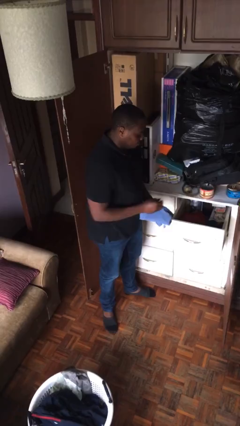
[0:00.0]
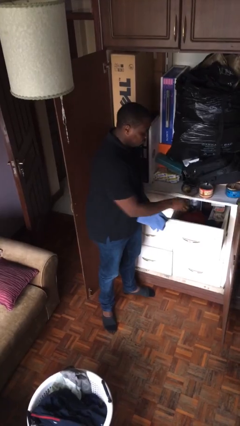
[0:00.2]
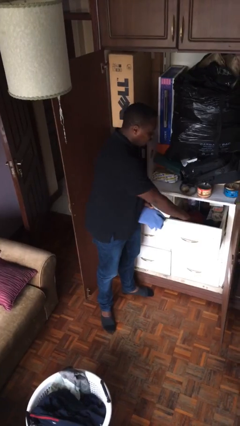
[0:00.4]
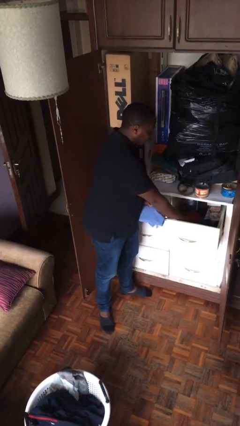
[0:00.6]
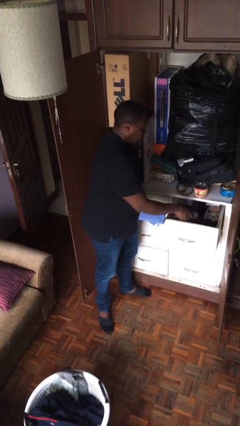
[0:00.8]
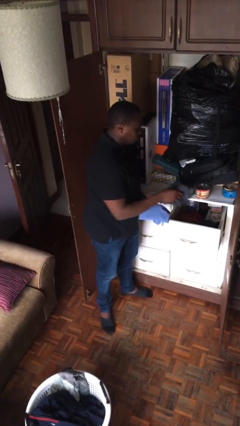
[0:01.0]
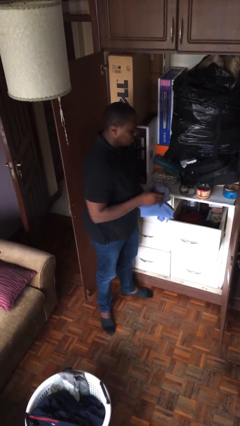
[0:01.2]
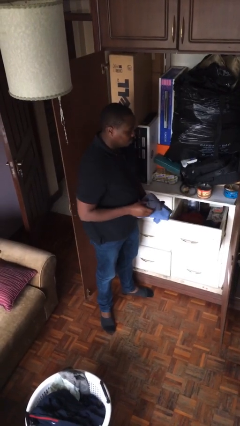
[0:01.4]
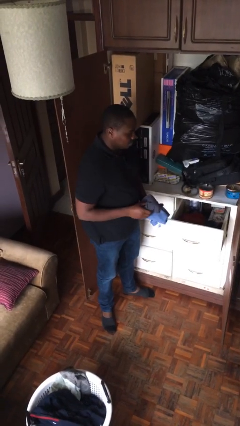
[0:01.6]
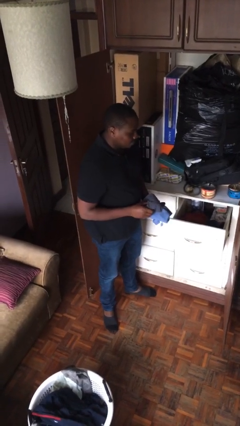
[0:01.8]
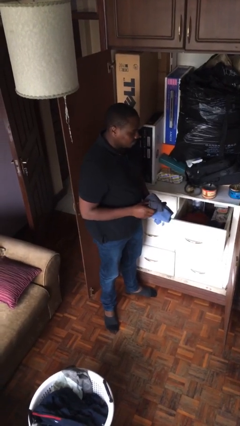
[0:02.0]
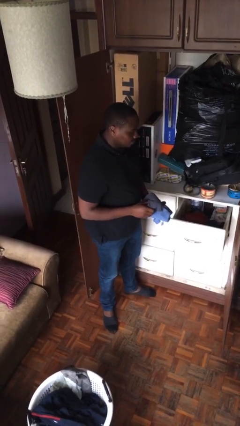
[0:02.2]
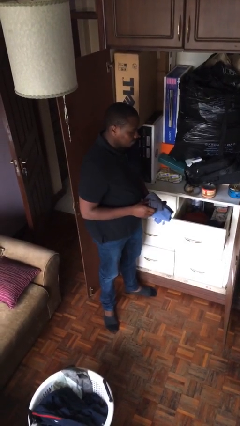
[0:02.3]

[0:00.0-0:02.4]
person takes clothes from dresser

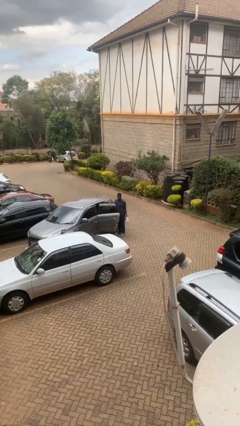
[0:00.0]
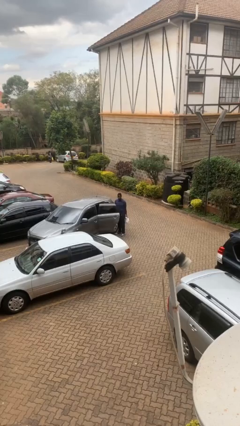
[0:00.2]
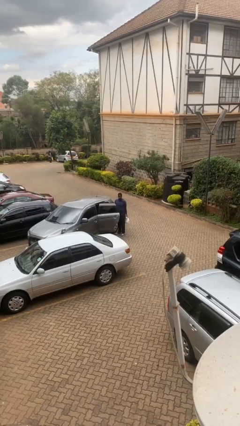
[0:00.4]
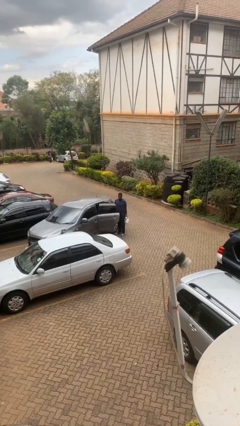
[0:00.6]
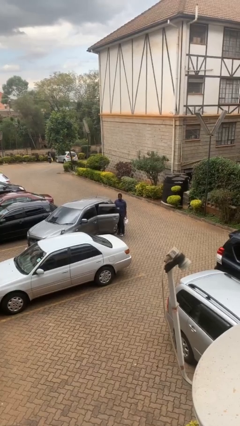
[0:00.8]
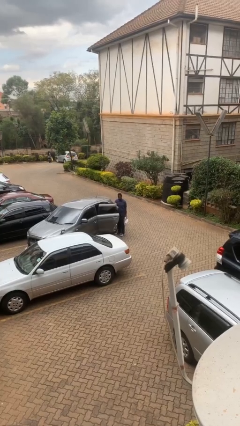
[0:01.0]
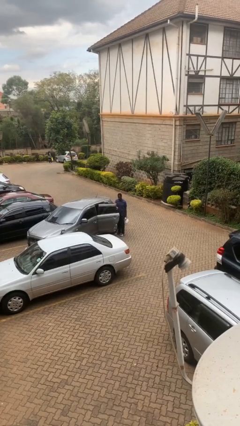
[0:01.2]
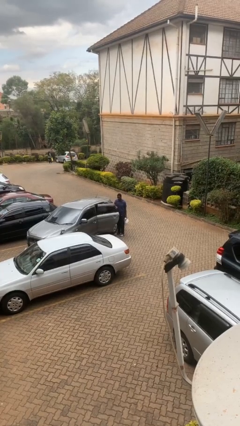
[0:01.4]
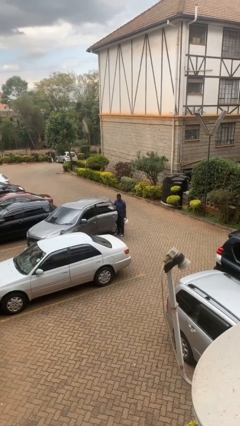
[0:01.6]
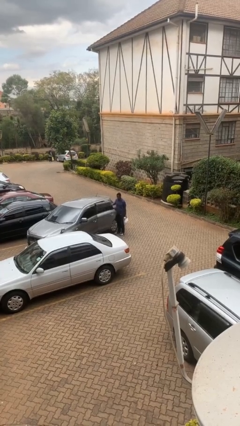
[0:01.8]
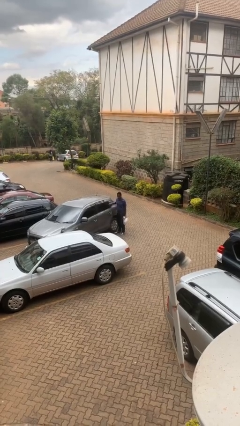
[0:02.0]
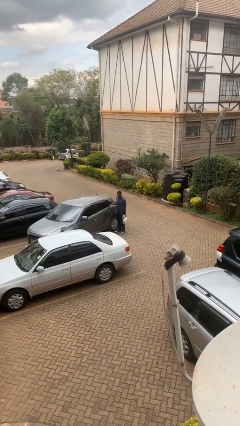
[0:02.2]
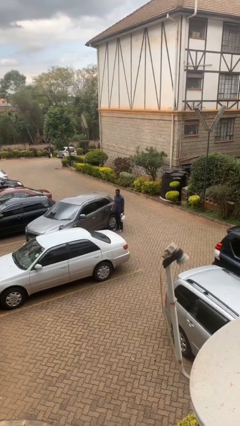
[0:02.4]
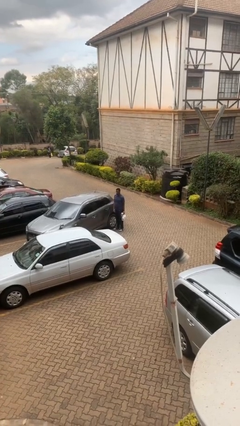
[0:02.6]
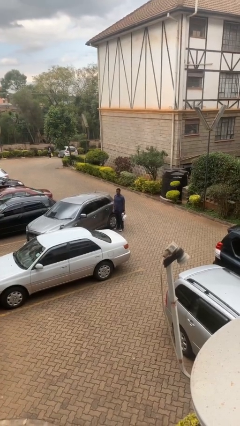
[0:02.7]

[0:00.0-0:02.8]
person closes car door

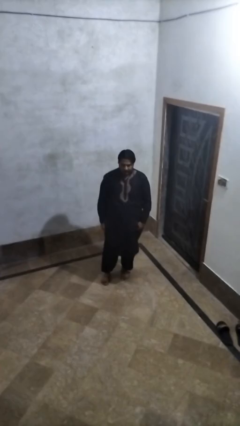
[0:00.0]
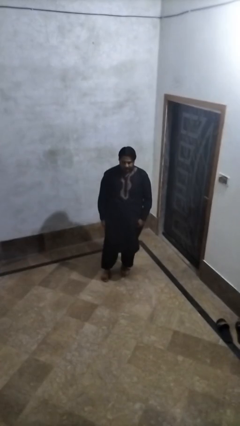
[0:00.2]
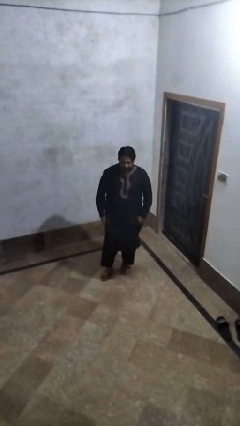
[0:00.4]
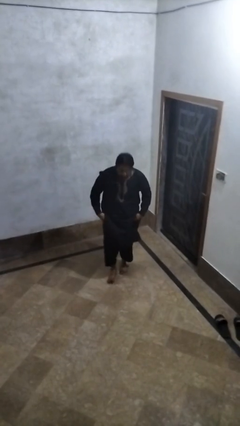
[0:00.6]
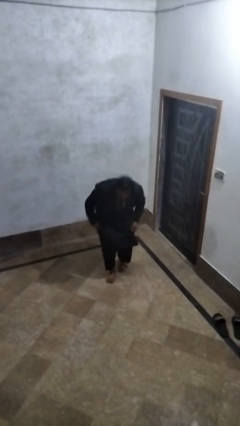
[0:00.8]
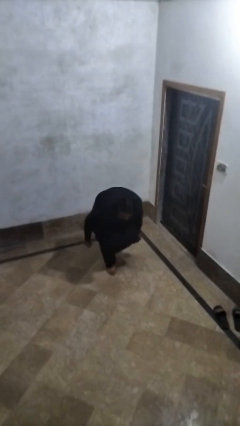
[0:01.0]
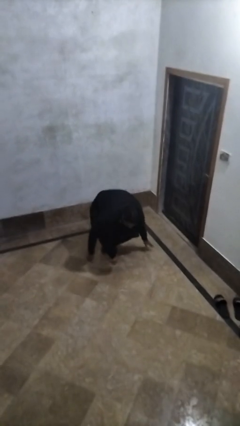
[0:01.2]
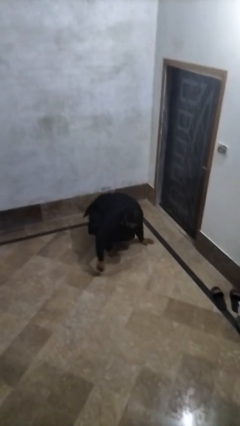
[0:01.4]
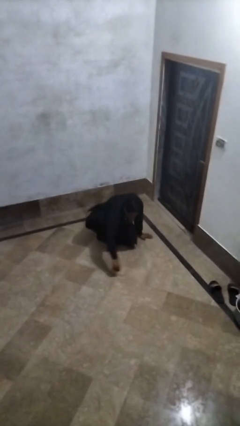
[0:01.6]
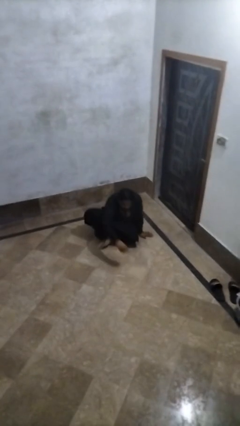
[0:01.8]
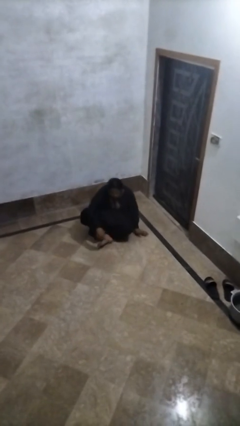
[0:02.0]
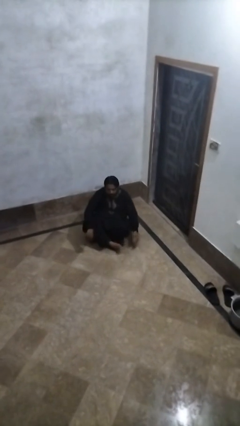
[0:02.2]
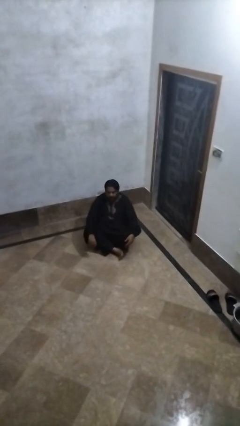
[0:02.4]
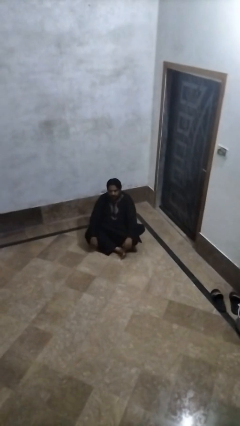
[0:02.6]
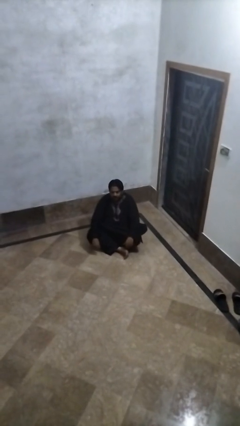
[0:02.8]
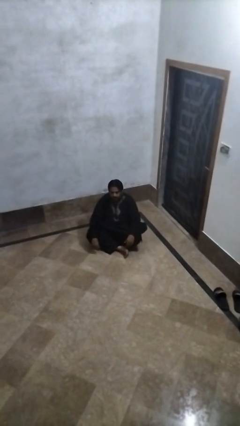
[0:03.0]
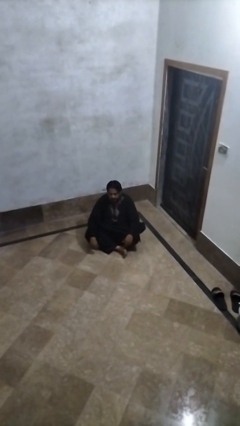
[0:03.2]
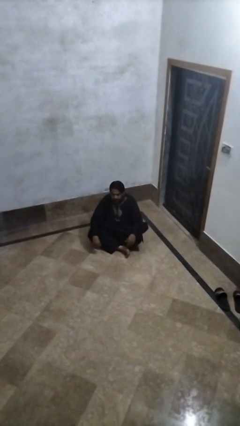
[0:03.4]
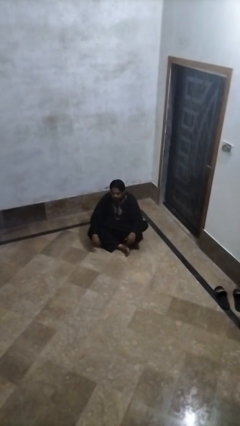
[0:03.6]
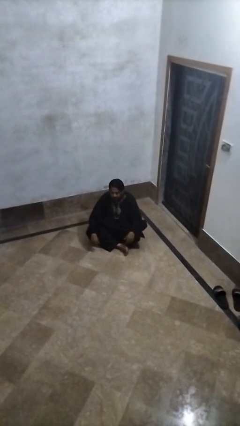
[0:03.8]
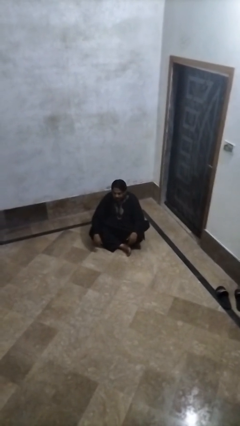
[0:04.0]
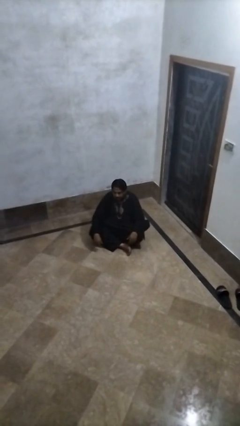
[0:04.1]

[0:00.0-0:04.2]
person sits crisscross

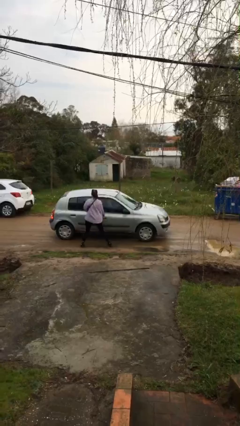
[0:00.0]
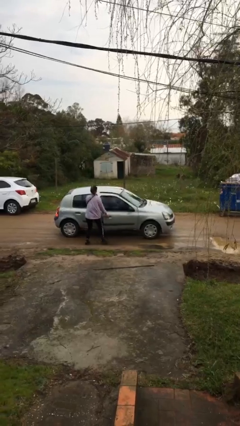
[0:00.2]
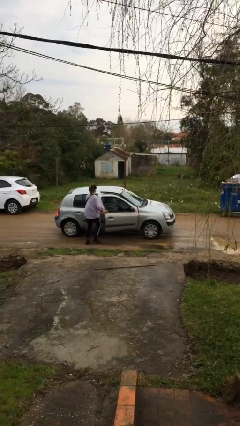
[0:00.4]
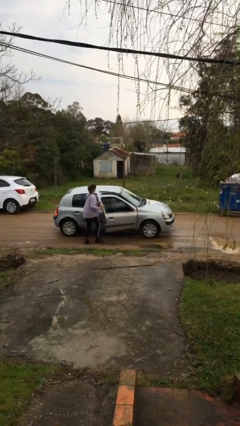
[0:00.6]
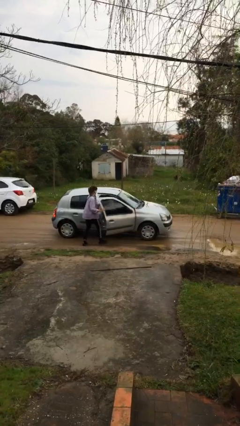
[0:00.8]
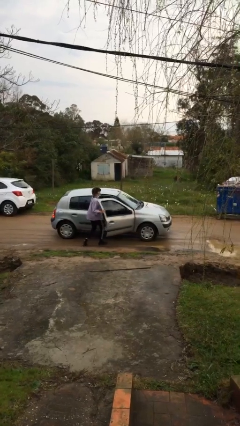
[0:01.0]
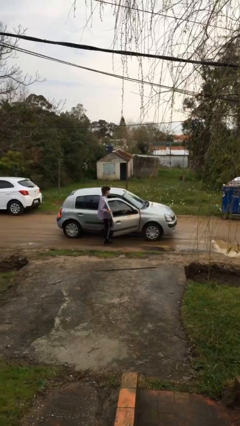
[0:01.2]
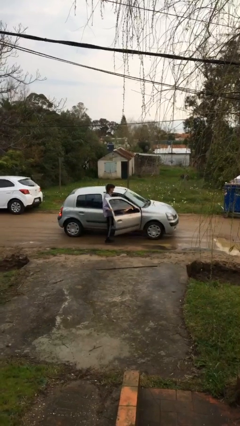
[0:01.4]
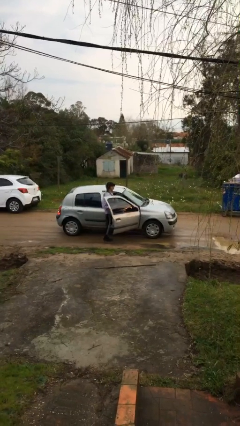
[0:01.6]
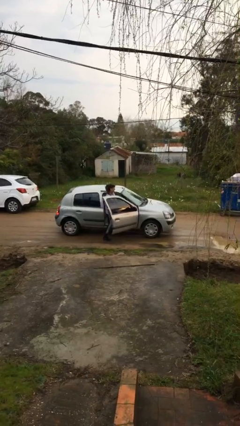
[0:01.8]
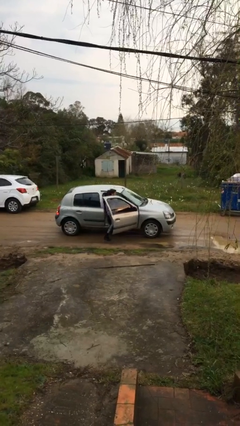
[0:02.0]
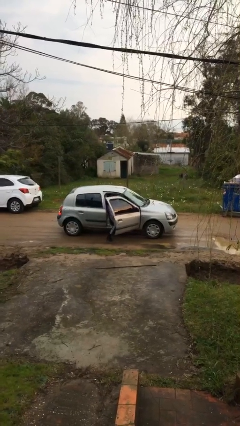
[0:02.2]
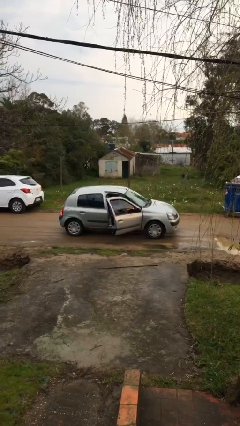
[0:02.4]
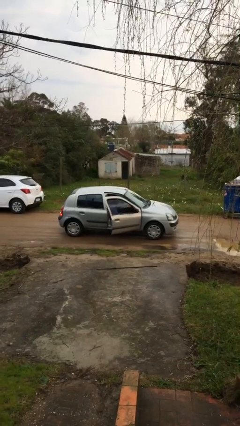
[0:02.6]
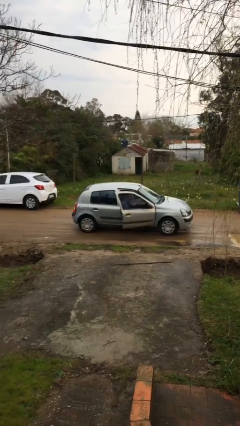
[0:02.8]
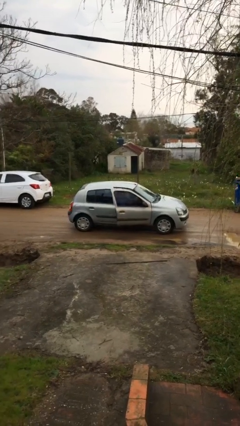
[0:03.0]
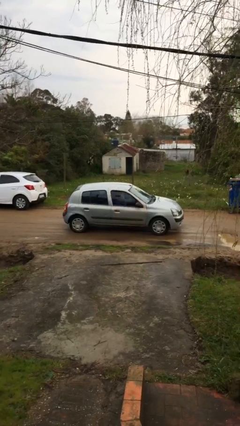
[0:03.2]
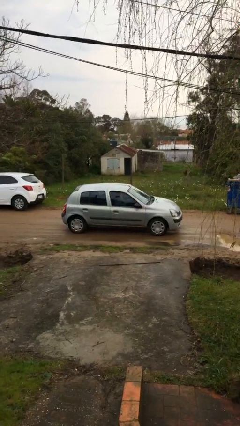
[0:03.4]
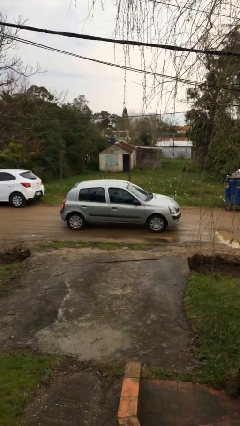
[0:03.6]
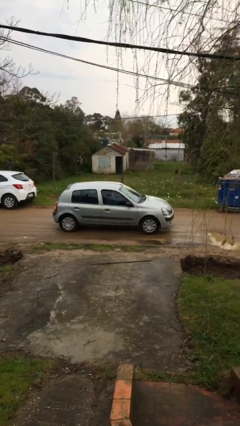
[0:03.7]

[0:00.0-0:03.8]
car picks up person

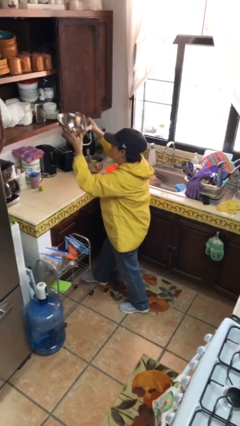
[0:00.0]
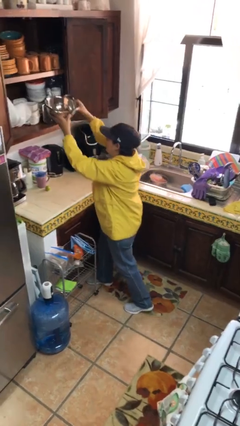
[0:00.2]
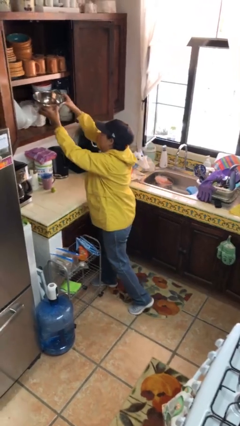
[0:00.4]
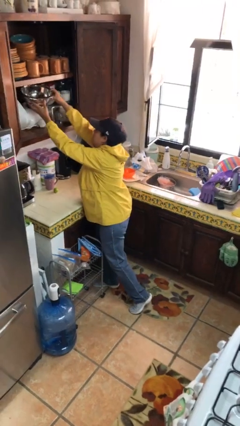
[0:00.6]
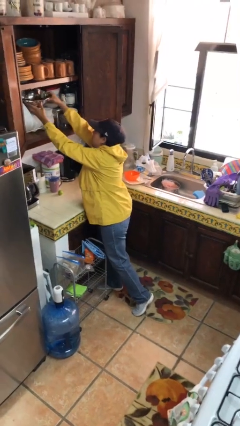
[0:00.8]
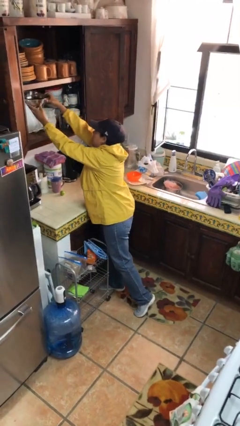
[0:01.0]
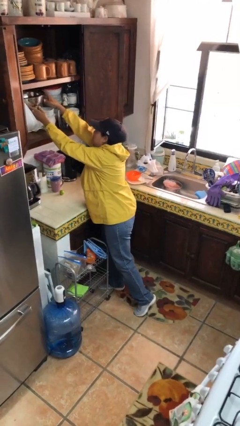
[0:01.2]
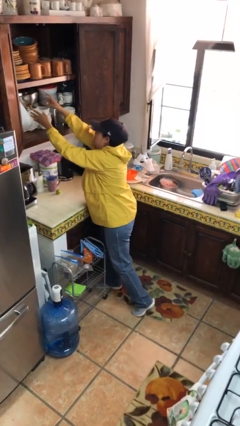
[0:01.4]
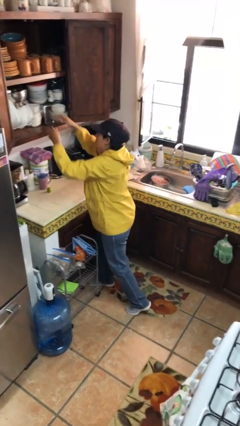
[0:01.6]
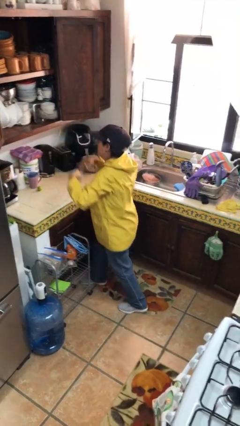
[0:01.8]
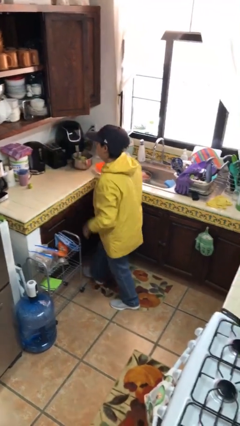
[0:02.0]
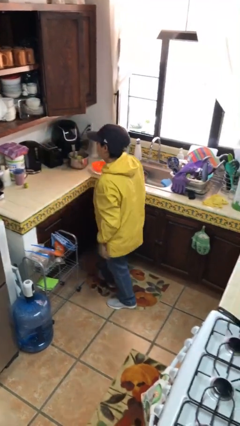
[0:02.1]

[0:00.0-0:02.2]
person puts down object into cabinet

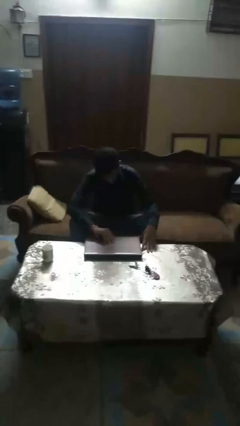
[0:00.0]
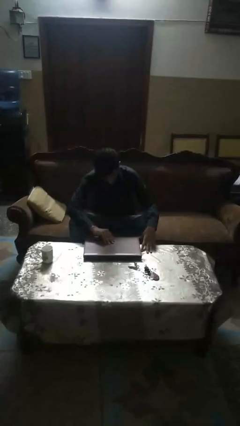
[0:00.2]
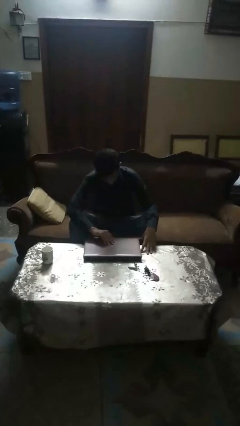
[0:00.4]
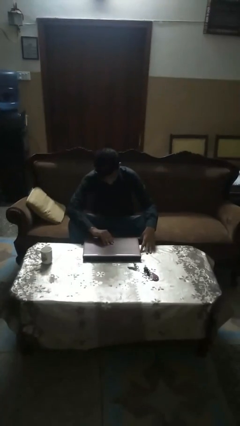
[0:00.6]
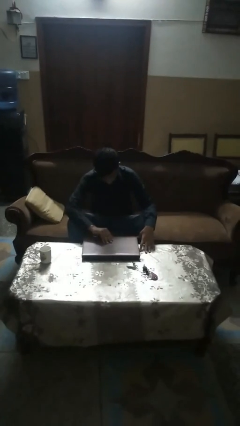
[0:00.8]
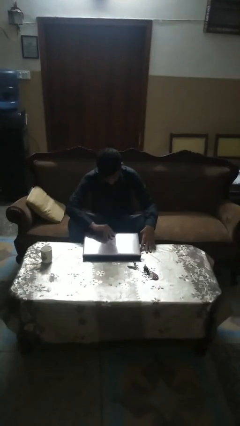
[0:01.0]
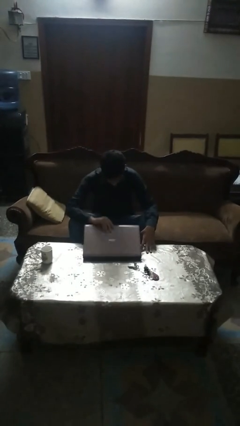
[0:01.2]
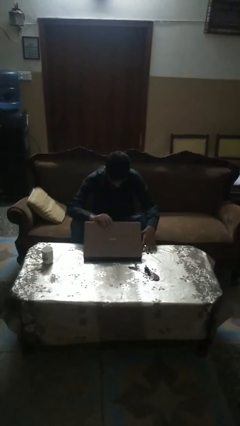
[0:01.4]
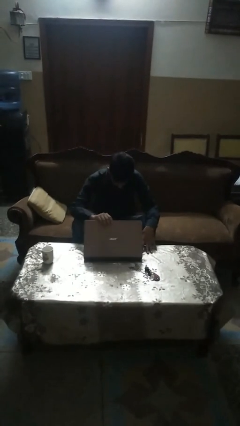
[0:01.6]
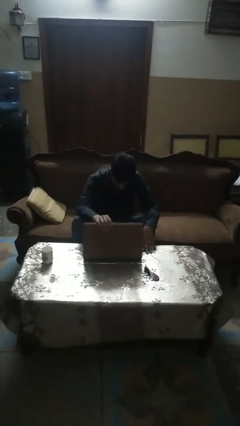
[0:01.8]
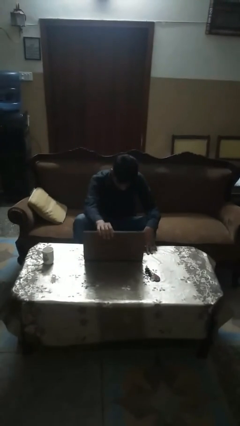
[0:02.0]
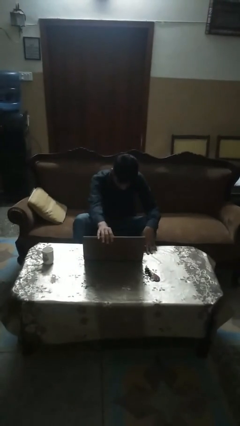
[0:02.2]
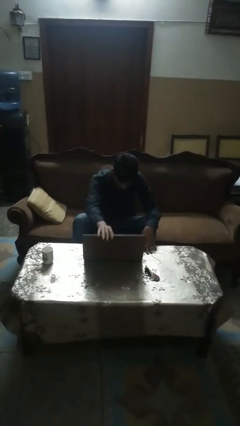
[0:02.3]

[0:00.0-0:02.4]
person opens laptop
